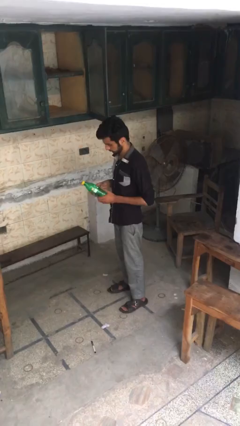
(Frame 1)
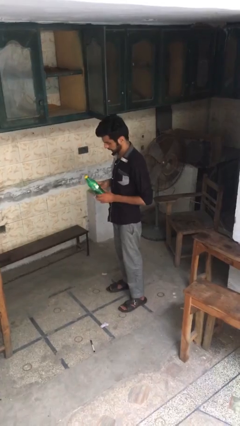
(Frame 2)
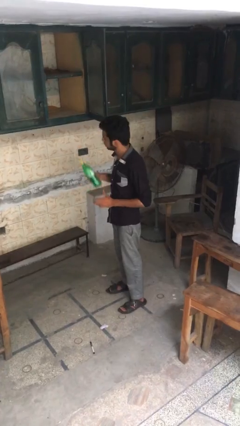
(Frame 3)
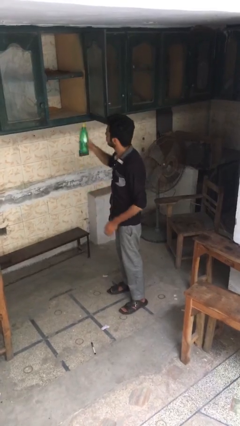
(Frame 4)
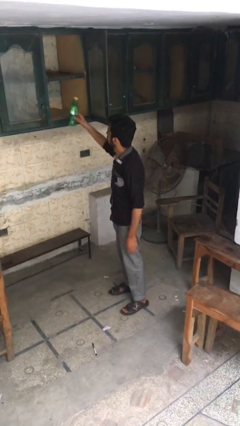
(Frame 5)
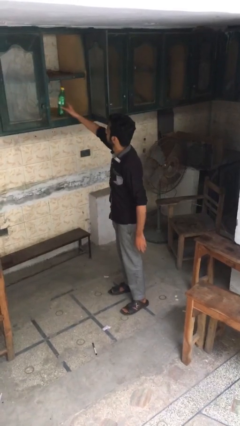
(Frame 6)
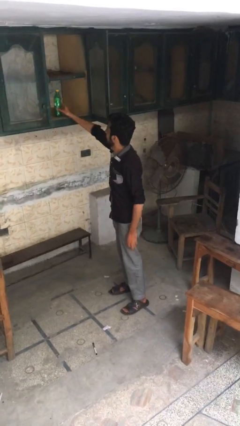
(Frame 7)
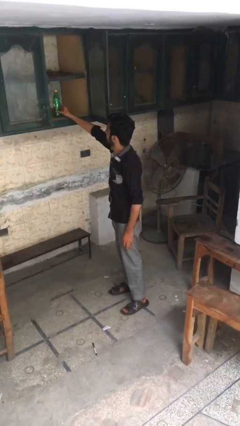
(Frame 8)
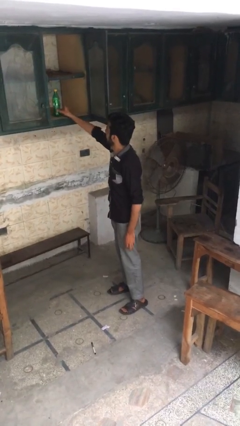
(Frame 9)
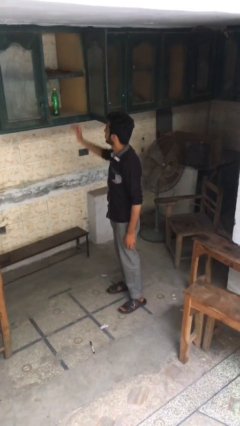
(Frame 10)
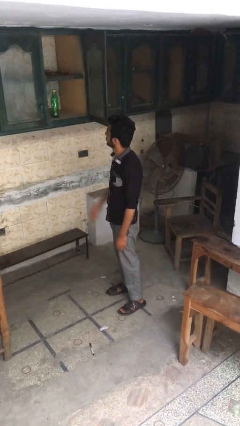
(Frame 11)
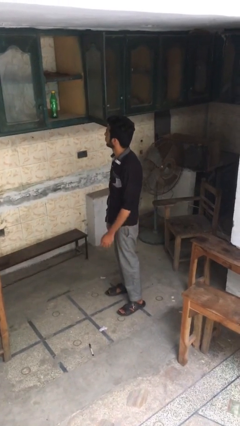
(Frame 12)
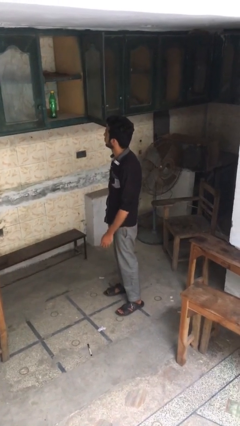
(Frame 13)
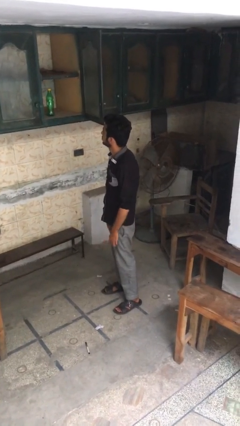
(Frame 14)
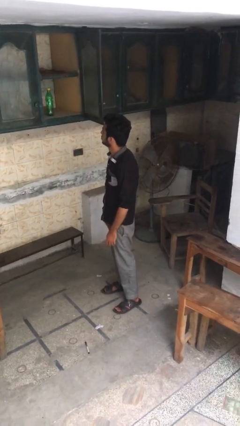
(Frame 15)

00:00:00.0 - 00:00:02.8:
person puts object in cabinet

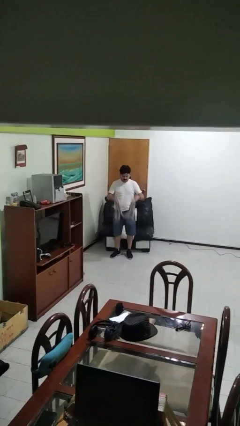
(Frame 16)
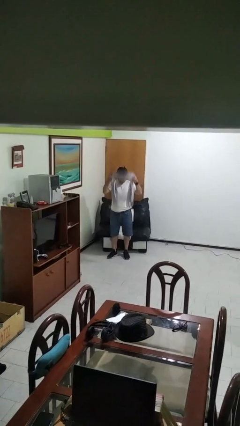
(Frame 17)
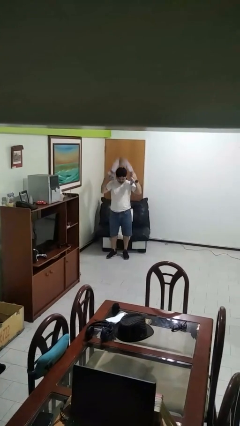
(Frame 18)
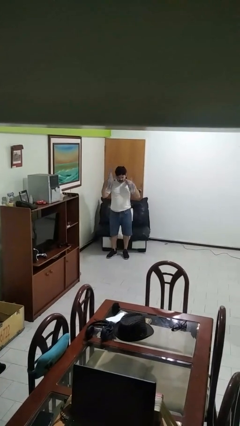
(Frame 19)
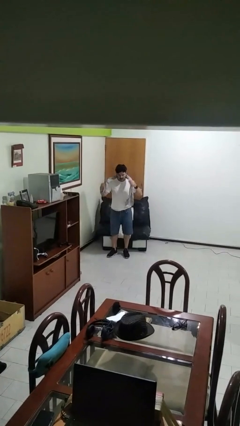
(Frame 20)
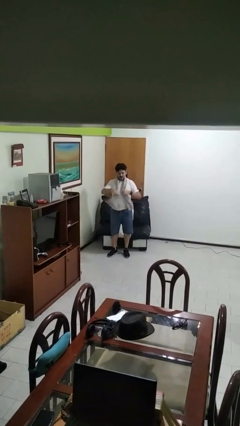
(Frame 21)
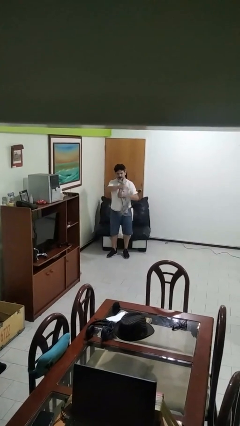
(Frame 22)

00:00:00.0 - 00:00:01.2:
person puts on scarf

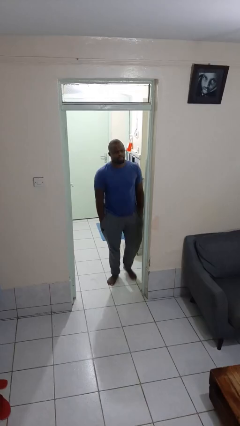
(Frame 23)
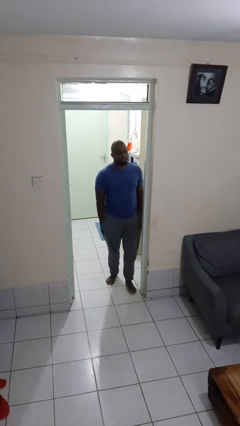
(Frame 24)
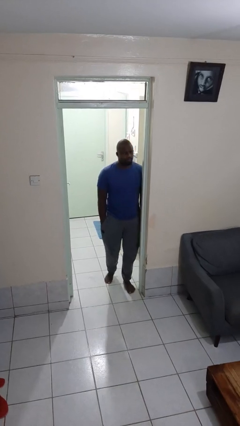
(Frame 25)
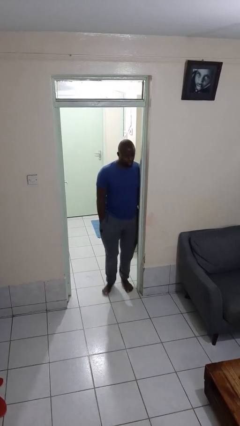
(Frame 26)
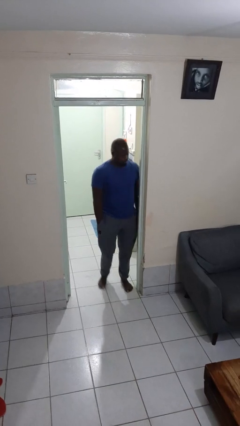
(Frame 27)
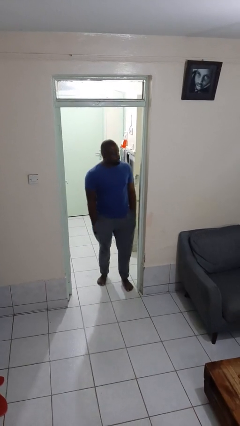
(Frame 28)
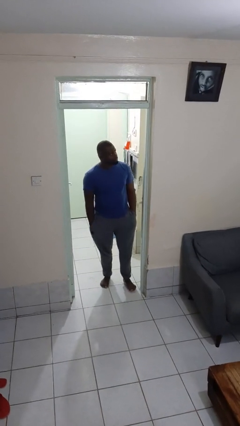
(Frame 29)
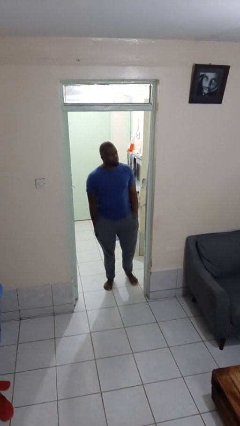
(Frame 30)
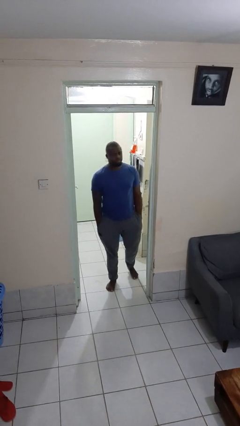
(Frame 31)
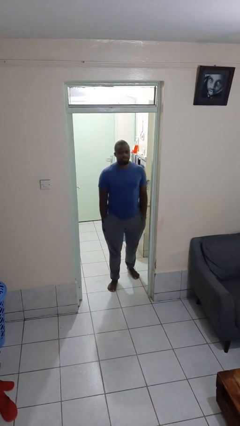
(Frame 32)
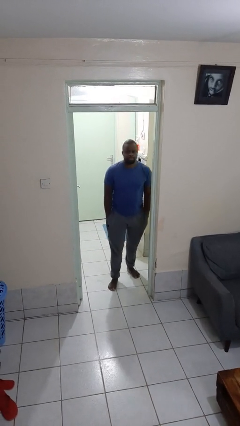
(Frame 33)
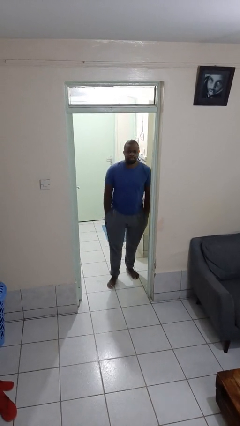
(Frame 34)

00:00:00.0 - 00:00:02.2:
person bumps into wall

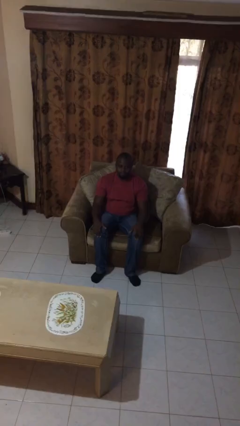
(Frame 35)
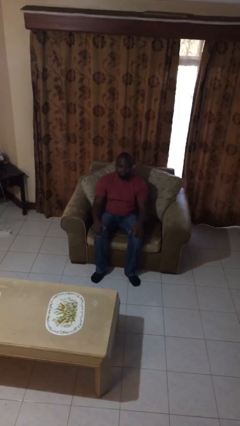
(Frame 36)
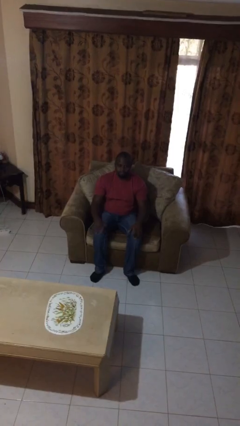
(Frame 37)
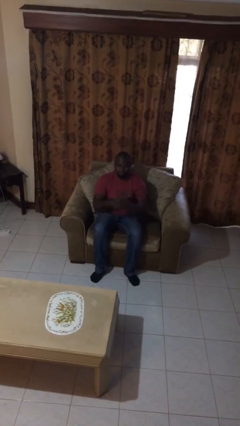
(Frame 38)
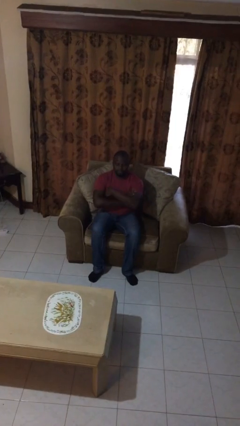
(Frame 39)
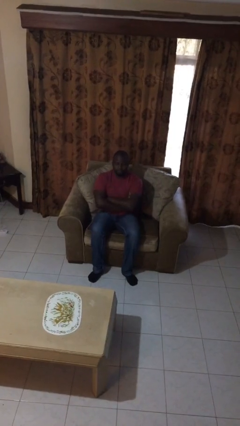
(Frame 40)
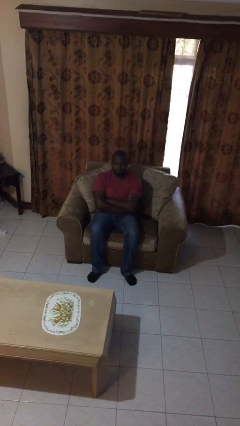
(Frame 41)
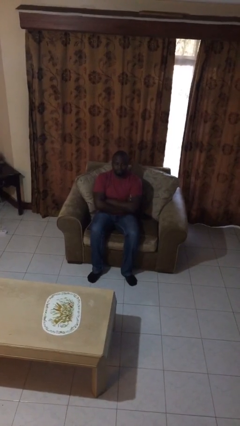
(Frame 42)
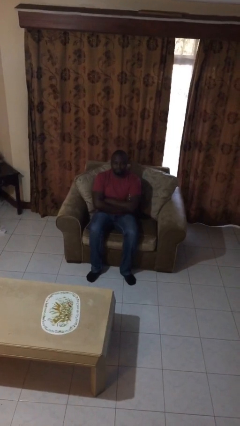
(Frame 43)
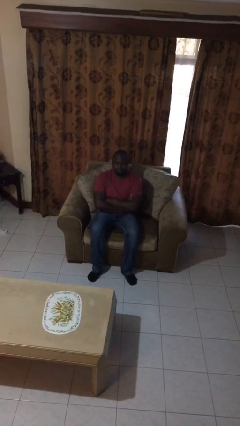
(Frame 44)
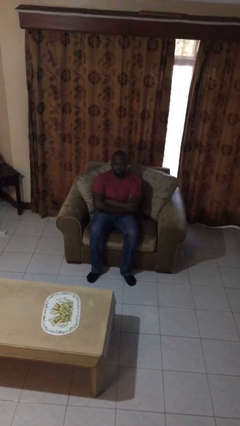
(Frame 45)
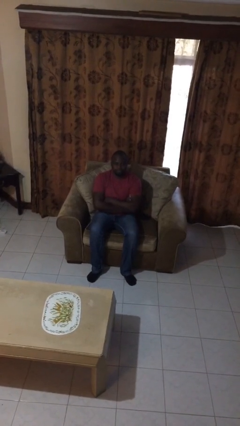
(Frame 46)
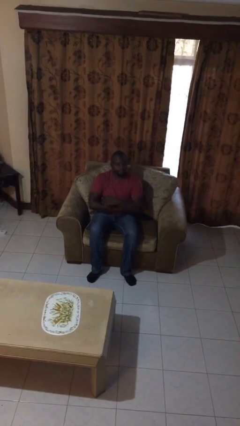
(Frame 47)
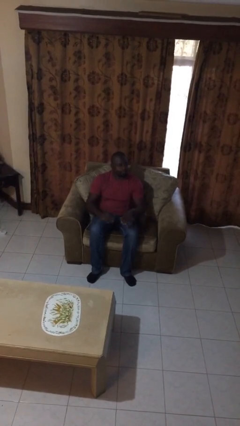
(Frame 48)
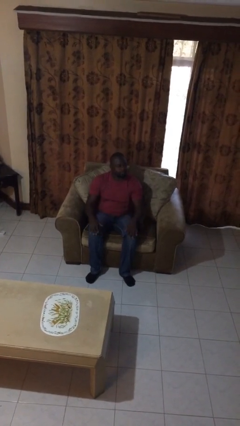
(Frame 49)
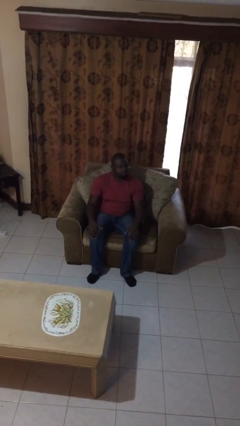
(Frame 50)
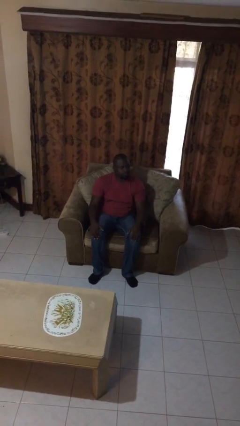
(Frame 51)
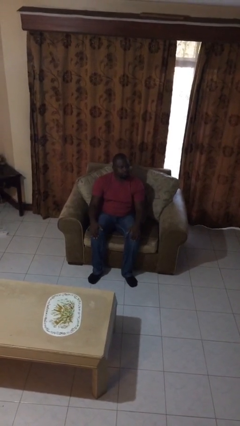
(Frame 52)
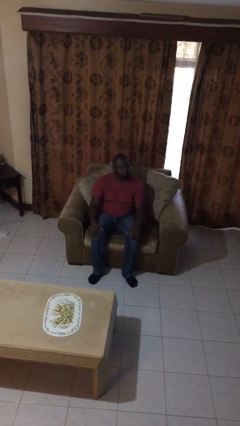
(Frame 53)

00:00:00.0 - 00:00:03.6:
person crosses arms

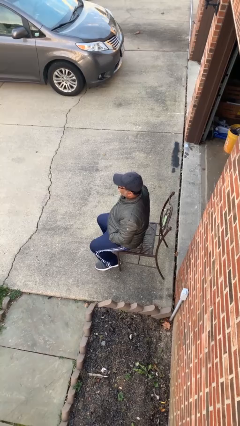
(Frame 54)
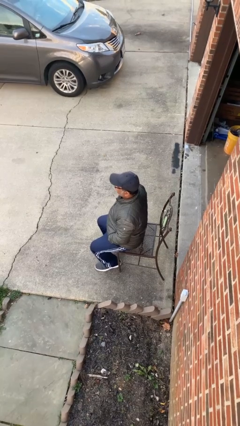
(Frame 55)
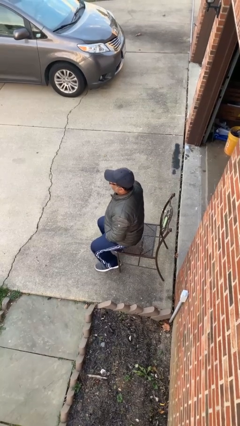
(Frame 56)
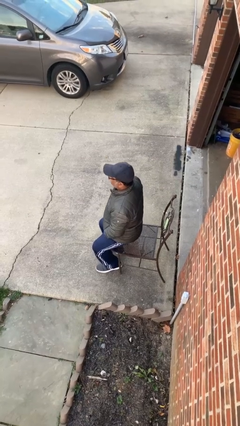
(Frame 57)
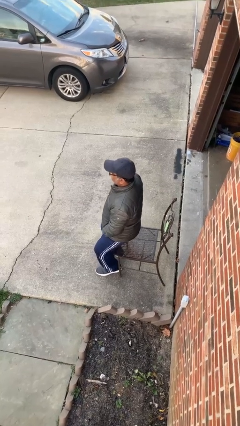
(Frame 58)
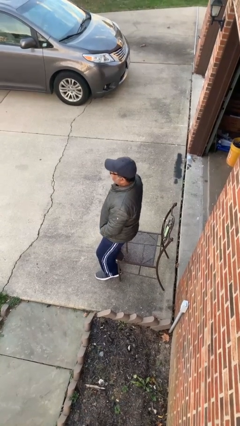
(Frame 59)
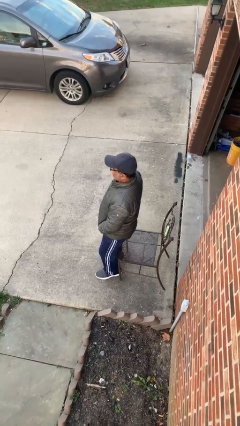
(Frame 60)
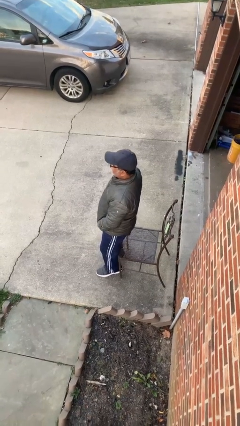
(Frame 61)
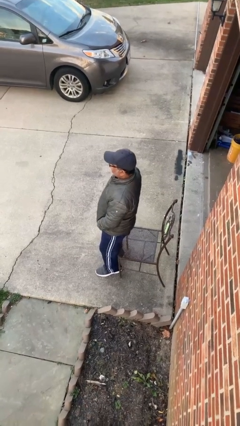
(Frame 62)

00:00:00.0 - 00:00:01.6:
person stands up

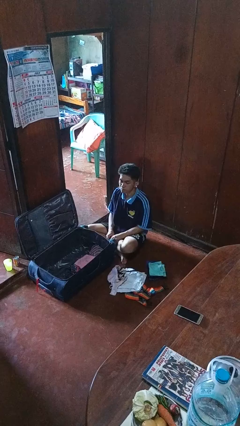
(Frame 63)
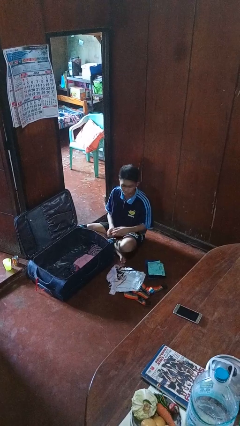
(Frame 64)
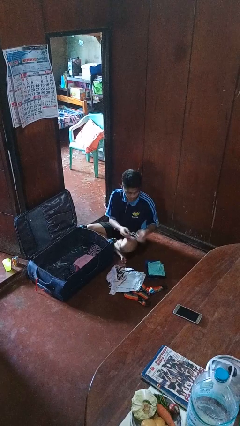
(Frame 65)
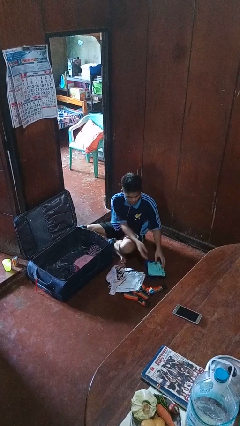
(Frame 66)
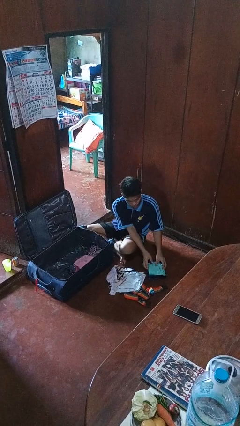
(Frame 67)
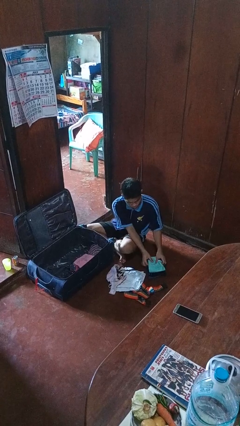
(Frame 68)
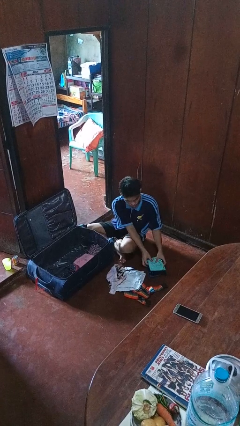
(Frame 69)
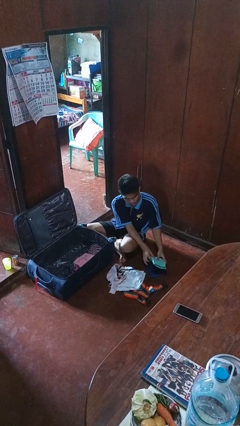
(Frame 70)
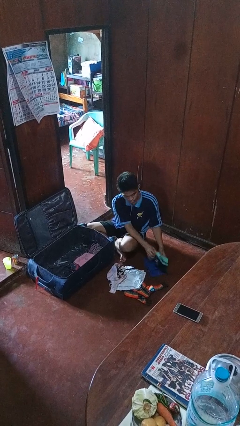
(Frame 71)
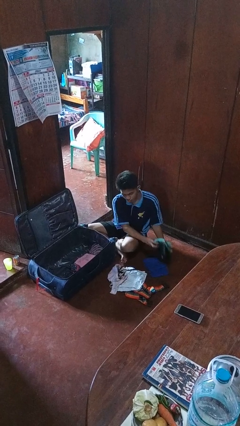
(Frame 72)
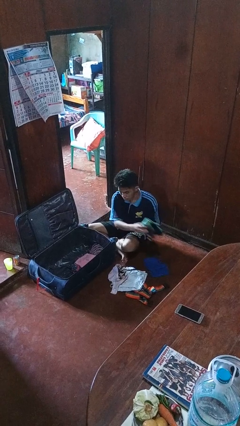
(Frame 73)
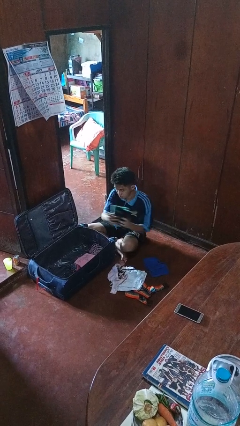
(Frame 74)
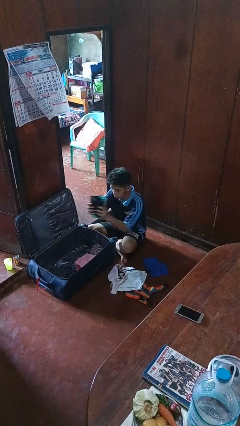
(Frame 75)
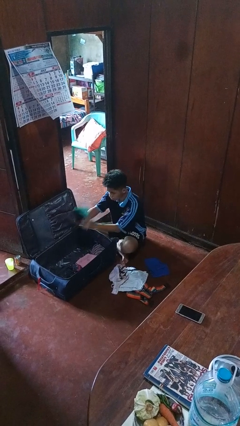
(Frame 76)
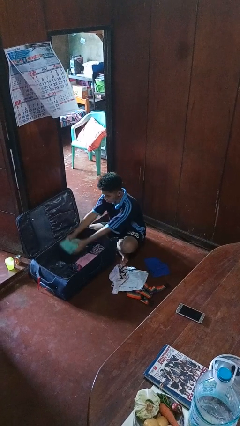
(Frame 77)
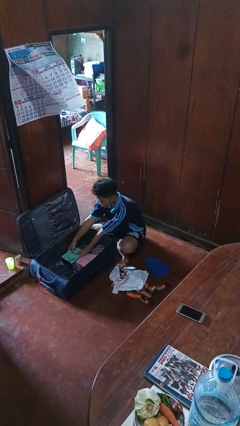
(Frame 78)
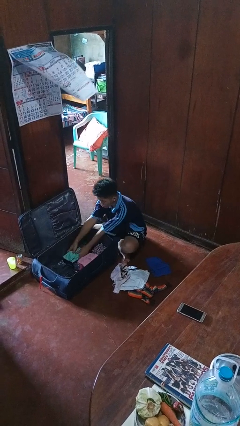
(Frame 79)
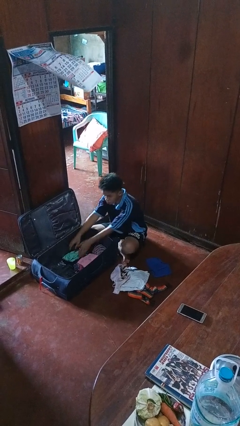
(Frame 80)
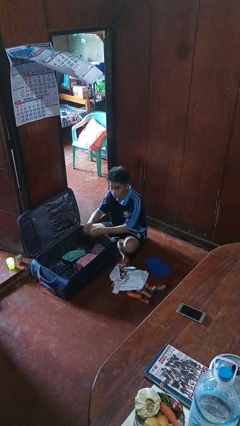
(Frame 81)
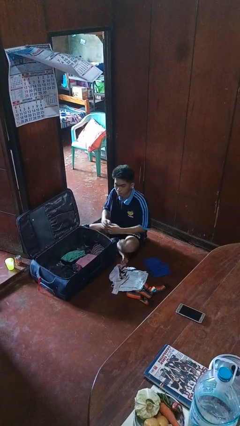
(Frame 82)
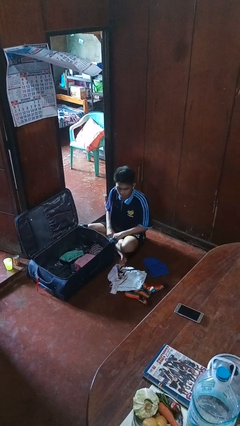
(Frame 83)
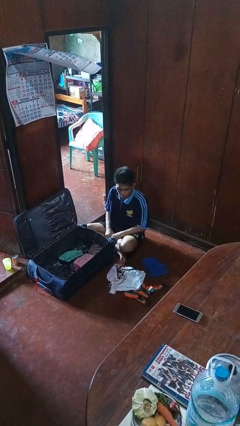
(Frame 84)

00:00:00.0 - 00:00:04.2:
person loads clothes into suitcase

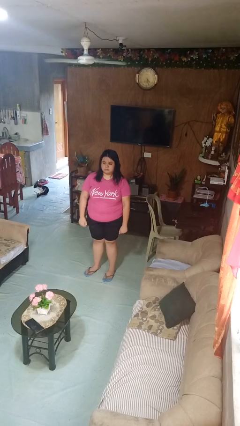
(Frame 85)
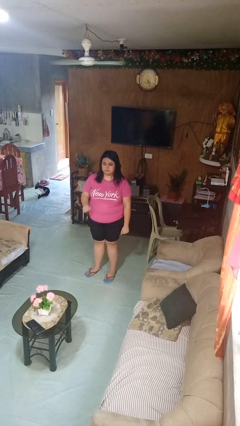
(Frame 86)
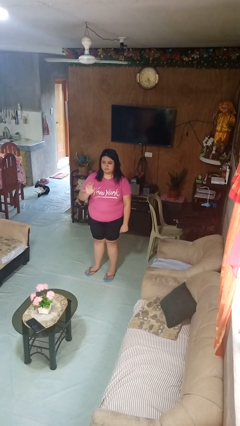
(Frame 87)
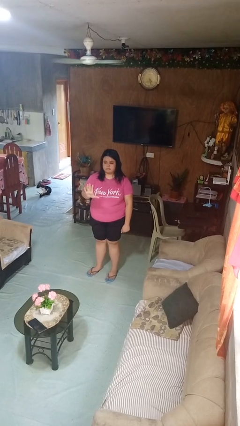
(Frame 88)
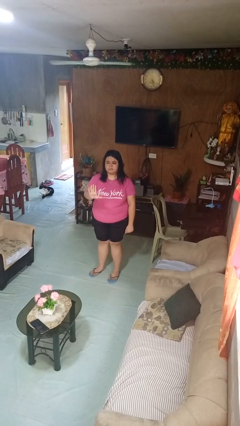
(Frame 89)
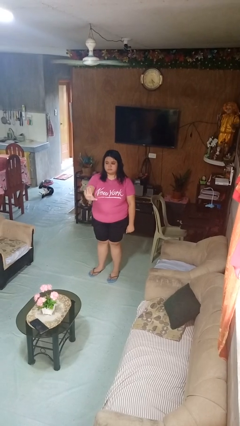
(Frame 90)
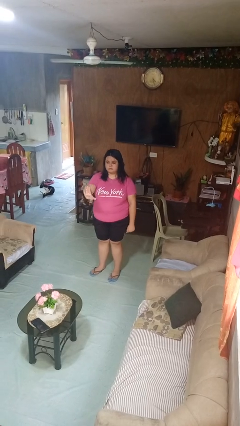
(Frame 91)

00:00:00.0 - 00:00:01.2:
person gestures stop

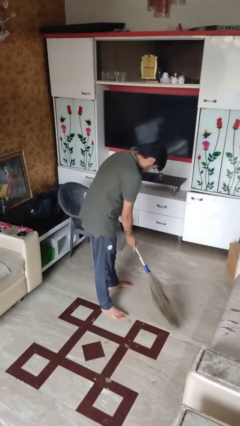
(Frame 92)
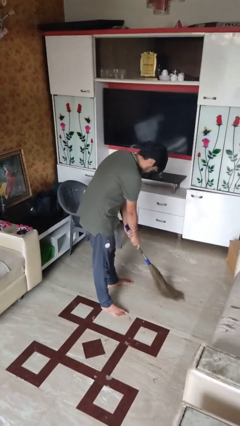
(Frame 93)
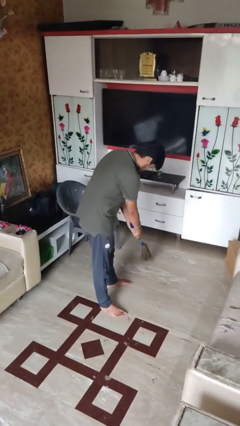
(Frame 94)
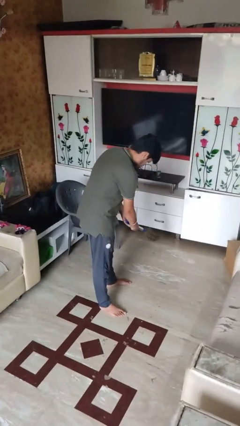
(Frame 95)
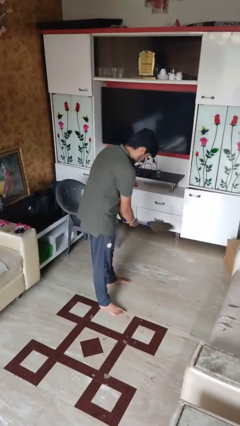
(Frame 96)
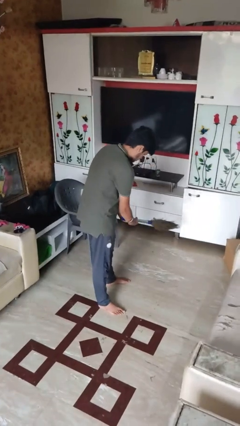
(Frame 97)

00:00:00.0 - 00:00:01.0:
person sweeps floor
